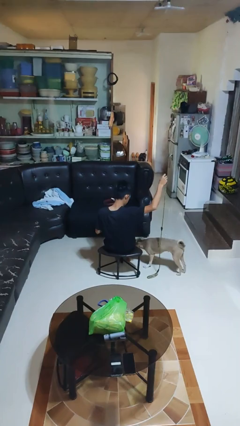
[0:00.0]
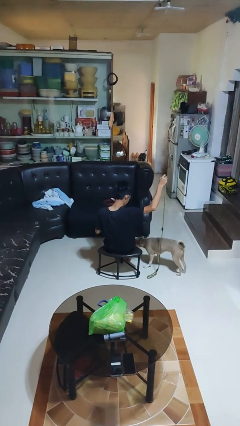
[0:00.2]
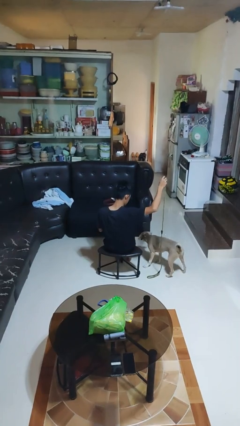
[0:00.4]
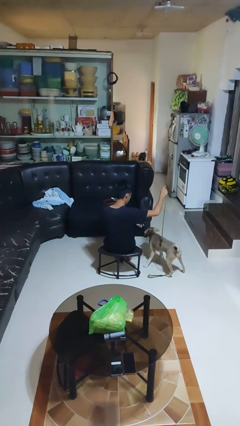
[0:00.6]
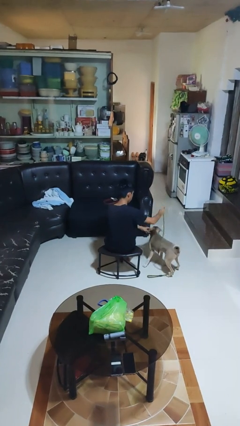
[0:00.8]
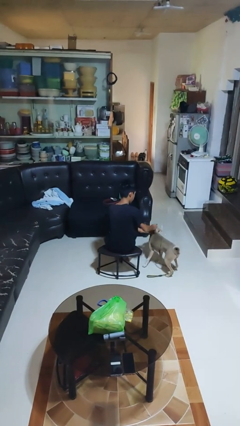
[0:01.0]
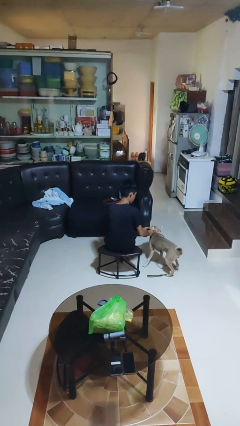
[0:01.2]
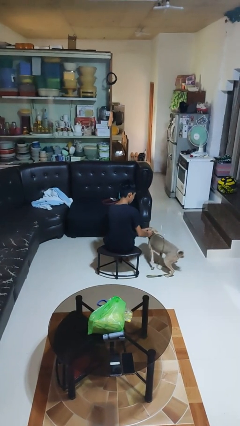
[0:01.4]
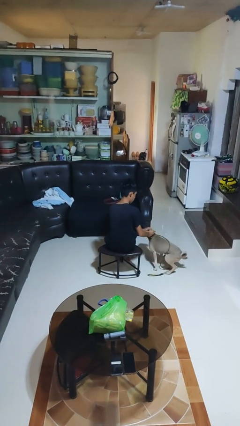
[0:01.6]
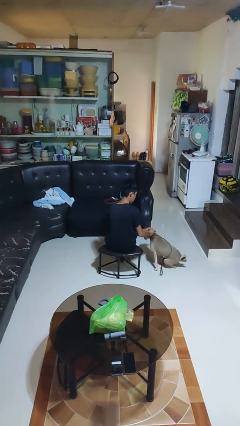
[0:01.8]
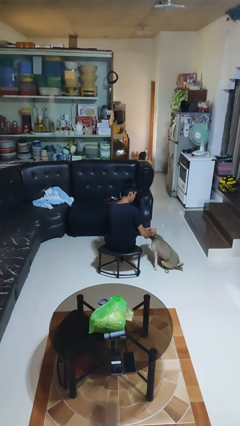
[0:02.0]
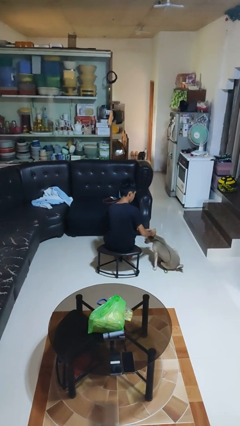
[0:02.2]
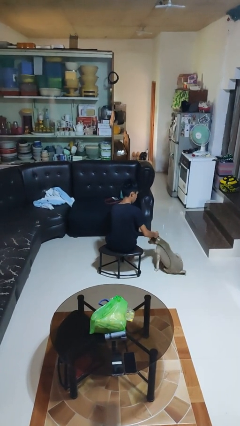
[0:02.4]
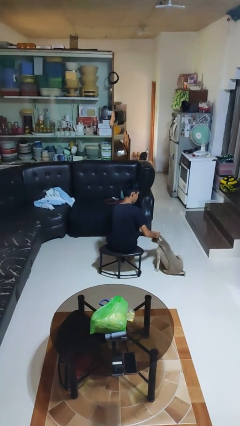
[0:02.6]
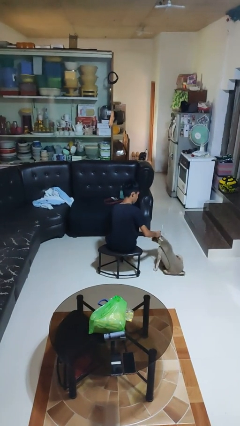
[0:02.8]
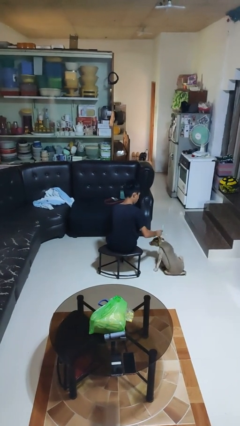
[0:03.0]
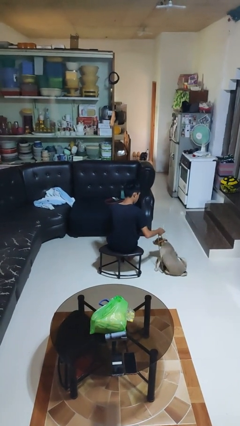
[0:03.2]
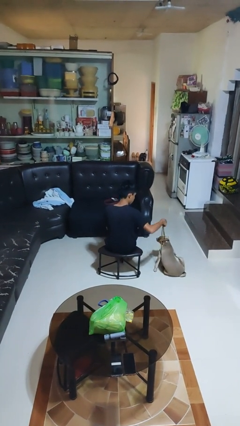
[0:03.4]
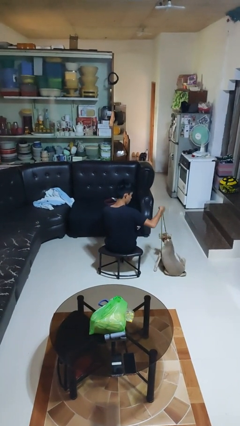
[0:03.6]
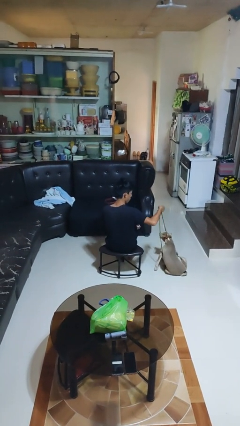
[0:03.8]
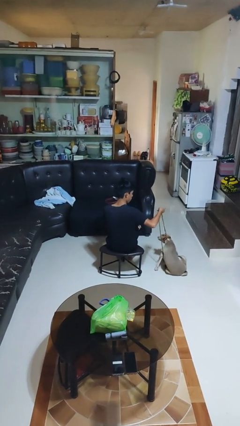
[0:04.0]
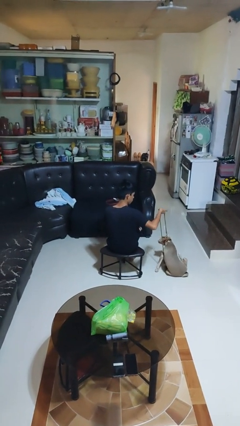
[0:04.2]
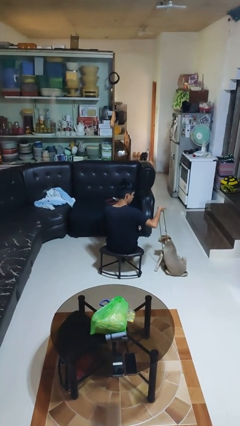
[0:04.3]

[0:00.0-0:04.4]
person attaches leash to dog

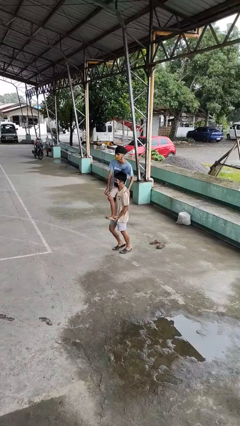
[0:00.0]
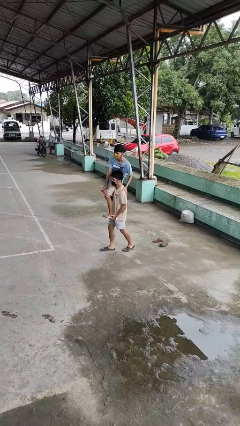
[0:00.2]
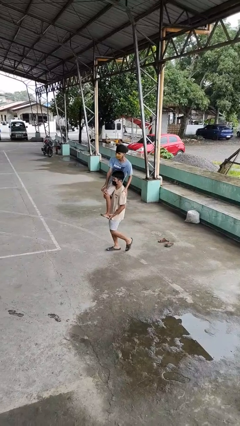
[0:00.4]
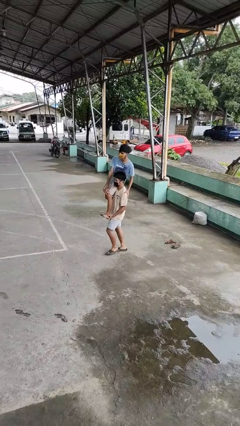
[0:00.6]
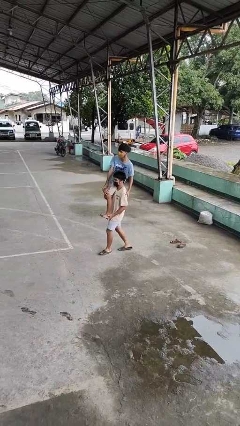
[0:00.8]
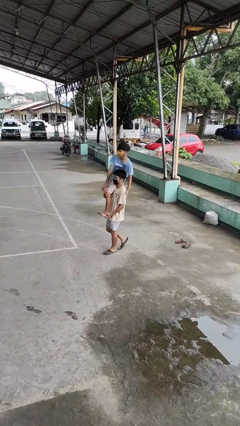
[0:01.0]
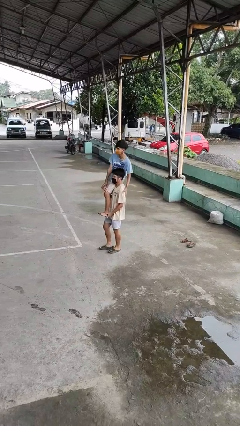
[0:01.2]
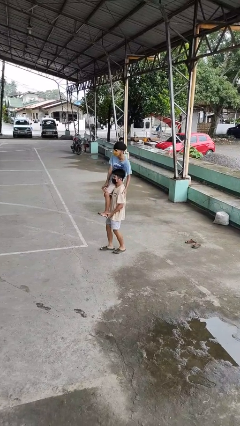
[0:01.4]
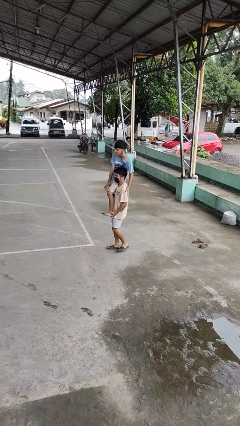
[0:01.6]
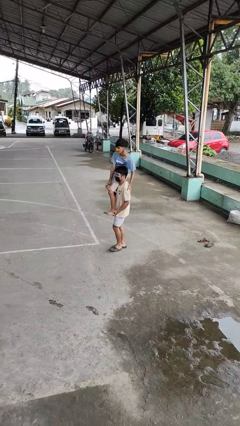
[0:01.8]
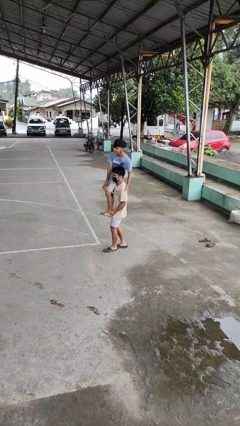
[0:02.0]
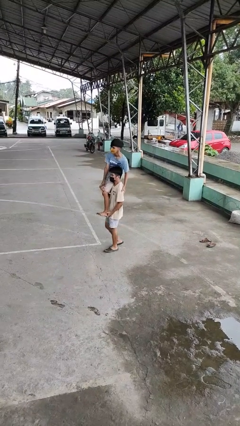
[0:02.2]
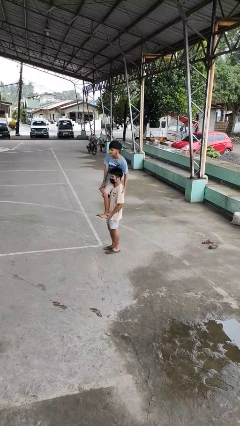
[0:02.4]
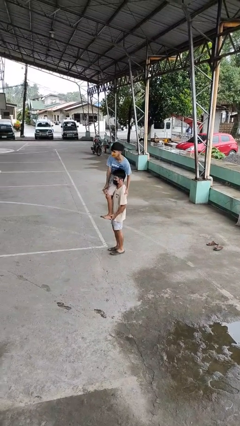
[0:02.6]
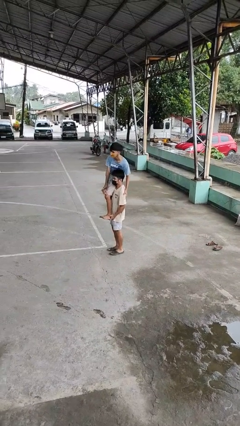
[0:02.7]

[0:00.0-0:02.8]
person carries person on shoulders

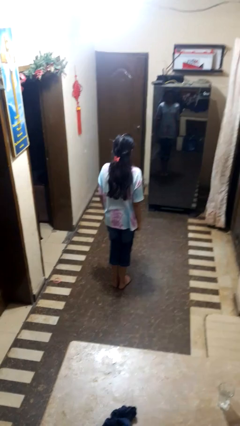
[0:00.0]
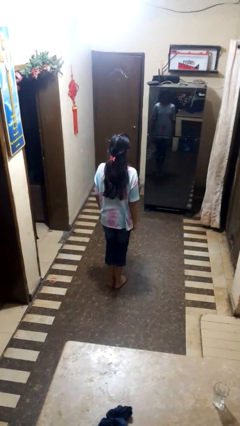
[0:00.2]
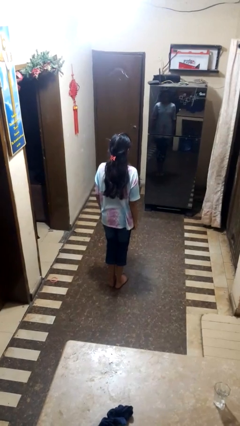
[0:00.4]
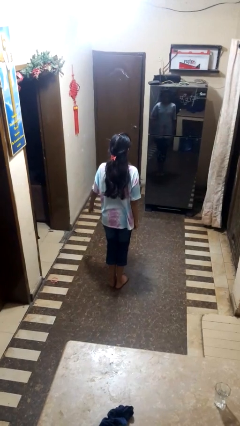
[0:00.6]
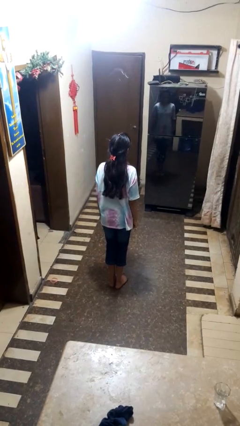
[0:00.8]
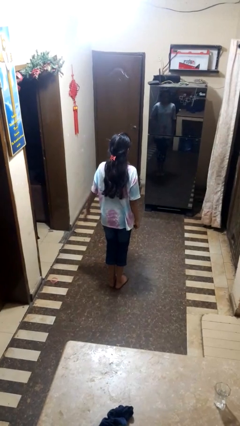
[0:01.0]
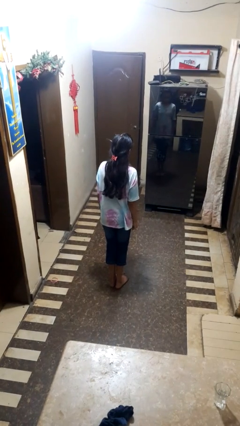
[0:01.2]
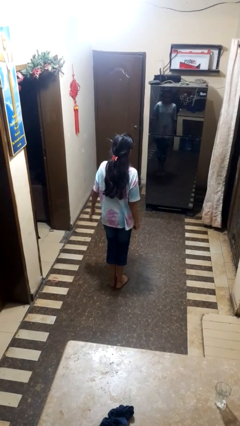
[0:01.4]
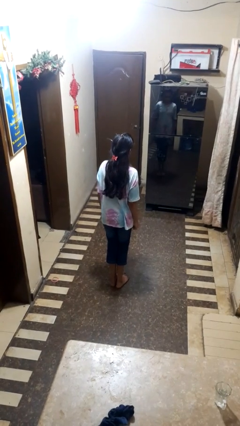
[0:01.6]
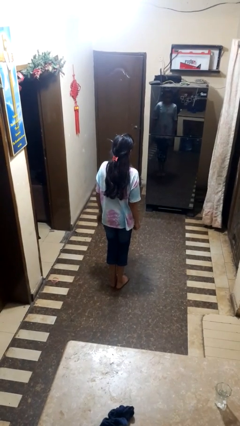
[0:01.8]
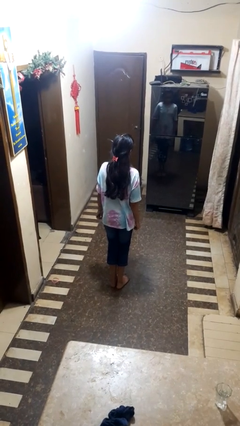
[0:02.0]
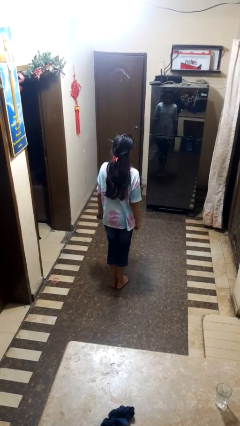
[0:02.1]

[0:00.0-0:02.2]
person slaps hands on thighs

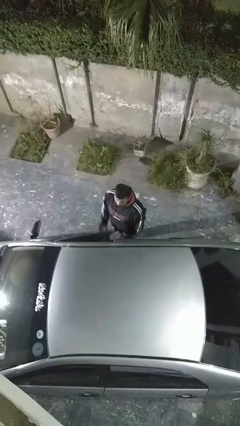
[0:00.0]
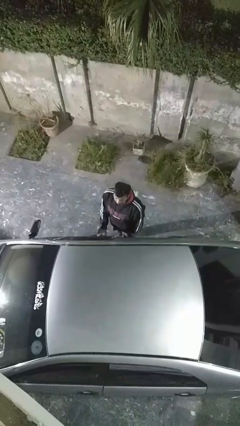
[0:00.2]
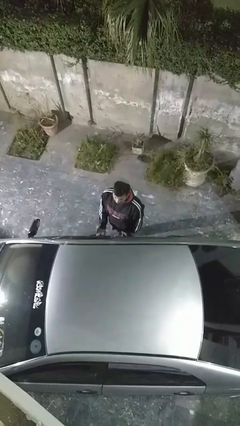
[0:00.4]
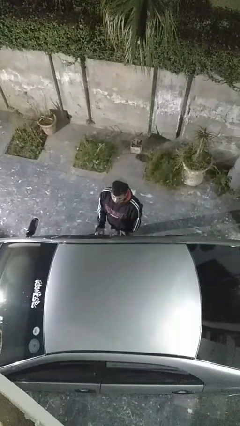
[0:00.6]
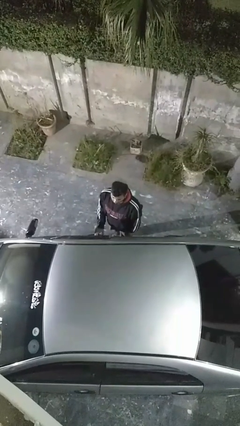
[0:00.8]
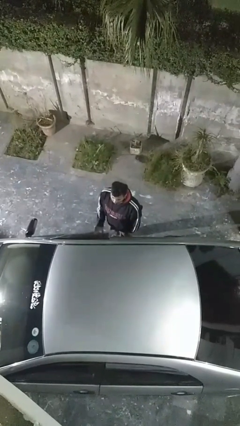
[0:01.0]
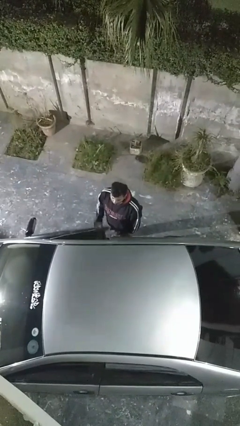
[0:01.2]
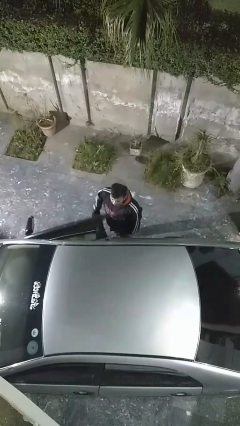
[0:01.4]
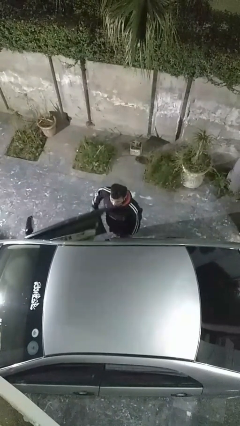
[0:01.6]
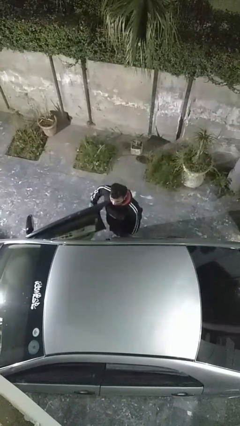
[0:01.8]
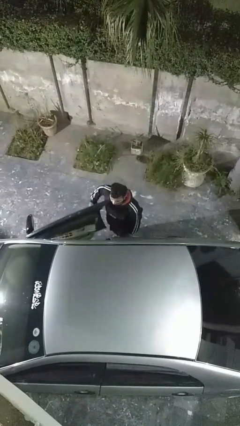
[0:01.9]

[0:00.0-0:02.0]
person opens car door

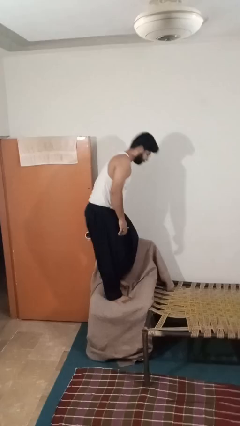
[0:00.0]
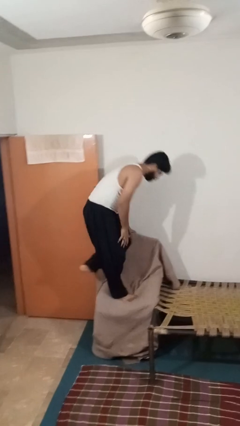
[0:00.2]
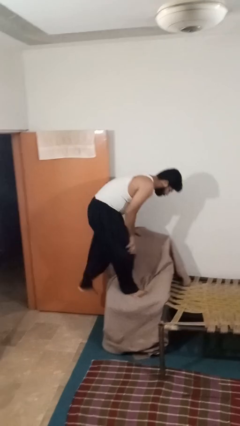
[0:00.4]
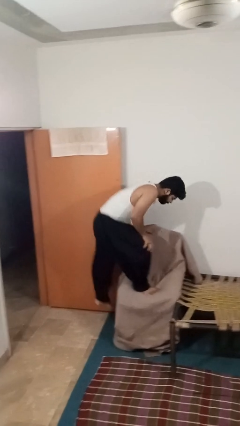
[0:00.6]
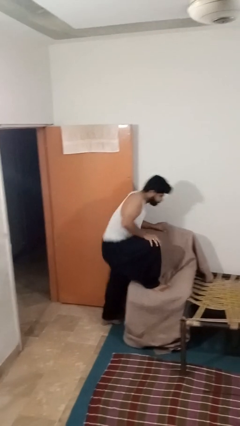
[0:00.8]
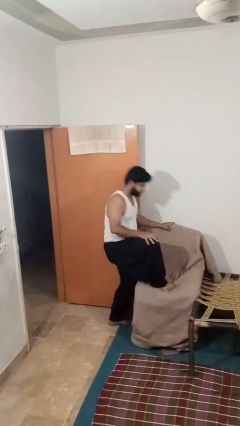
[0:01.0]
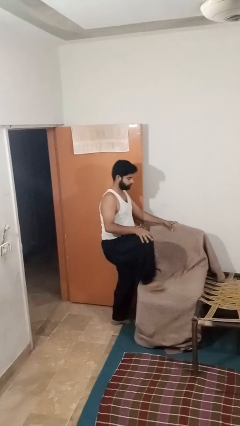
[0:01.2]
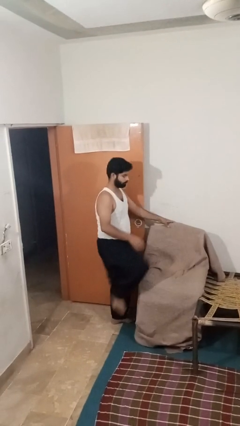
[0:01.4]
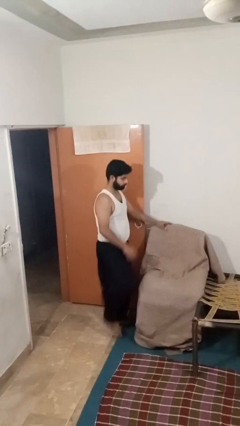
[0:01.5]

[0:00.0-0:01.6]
person climbs off couch

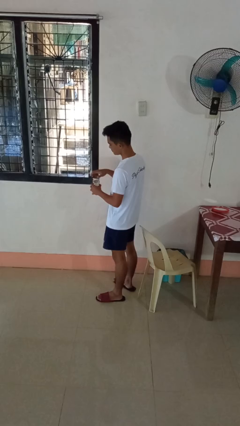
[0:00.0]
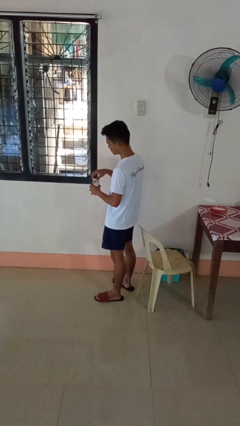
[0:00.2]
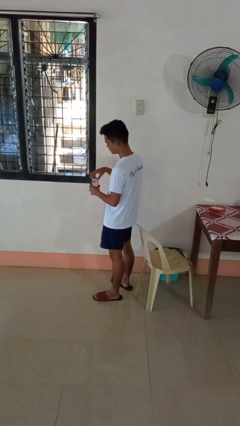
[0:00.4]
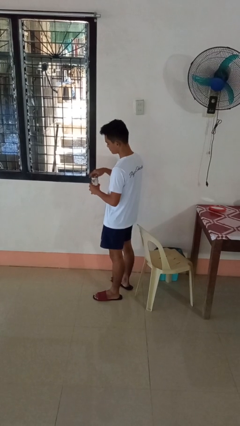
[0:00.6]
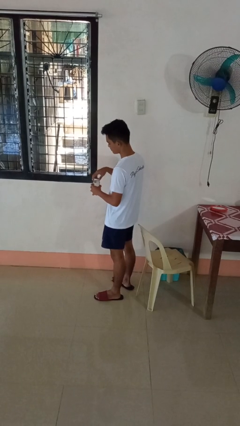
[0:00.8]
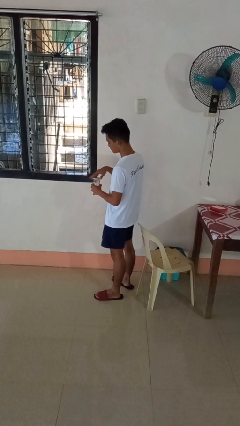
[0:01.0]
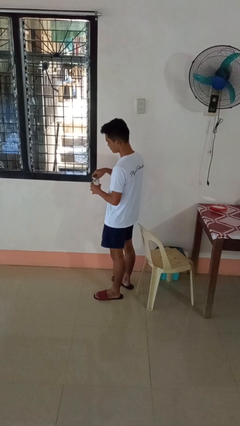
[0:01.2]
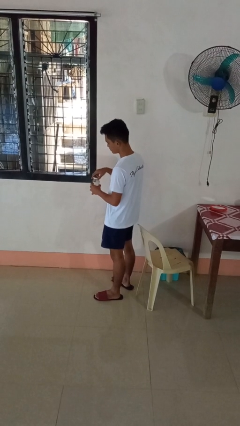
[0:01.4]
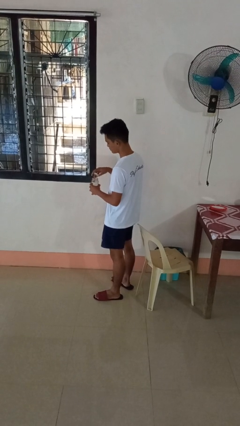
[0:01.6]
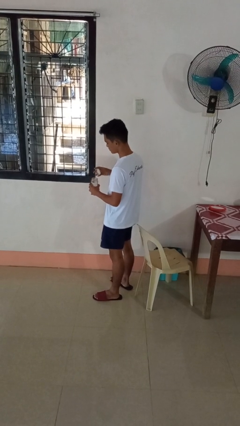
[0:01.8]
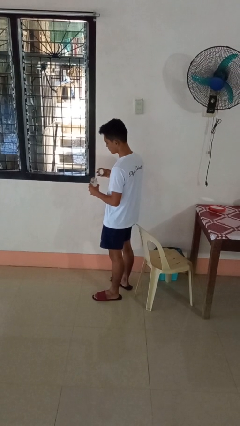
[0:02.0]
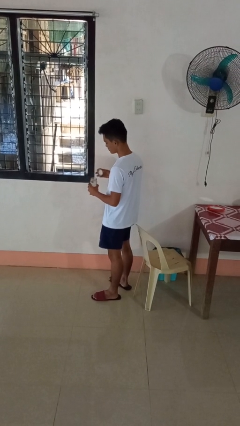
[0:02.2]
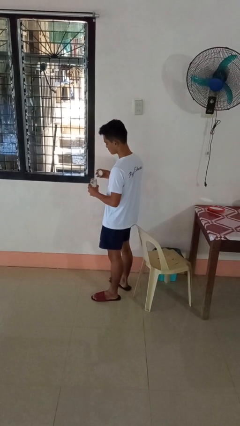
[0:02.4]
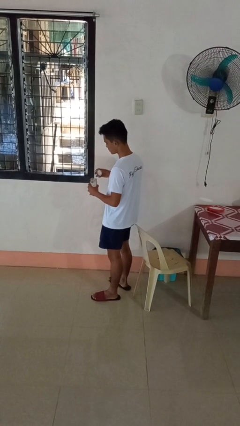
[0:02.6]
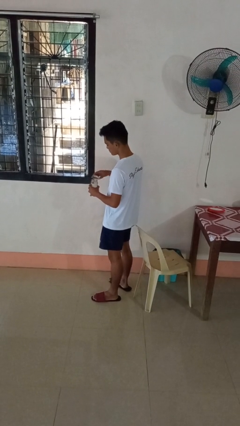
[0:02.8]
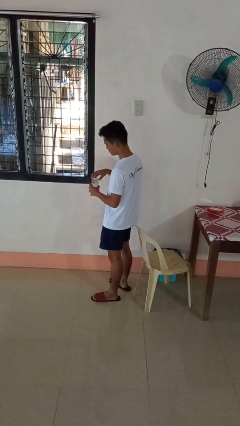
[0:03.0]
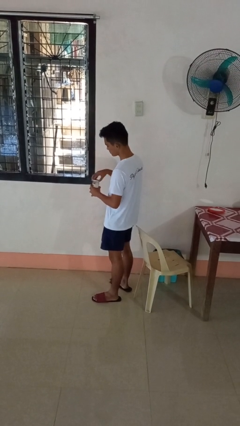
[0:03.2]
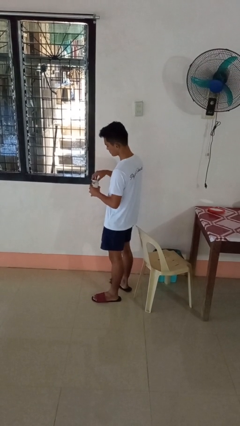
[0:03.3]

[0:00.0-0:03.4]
person opens jar

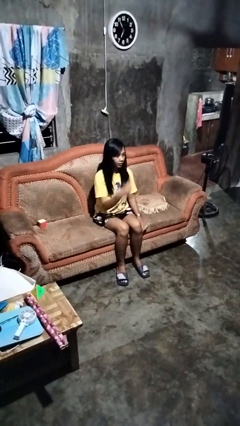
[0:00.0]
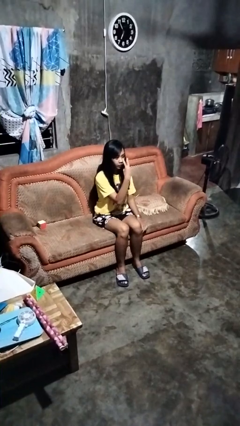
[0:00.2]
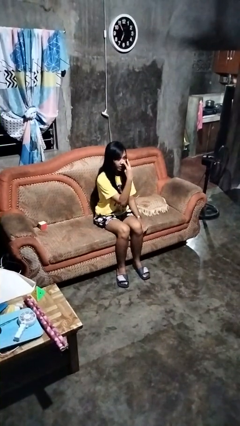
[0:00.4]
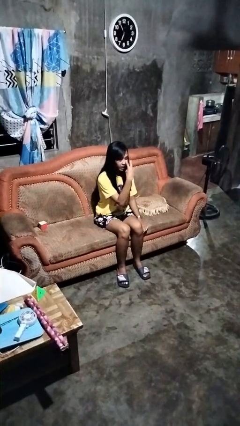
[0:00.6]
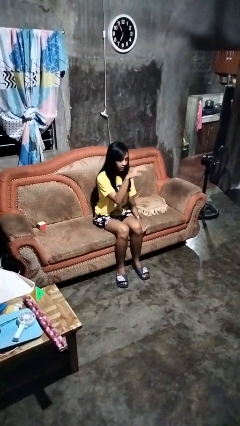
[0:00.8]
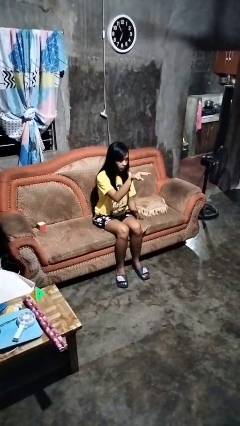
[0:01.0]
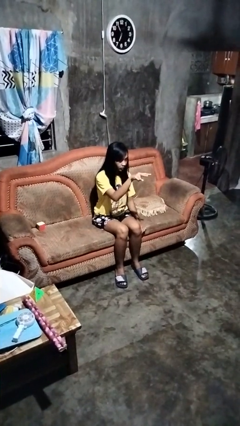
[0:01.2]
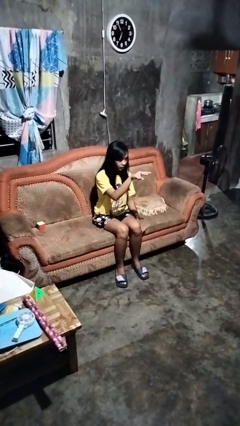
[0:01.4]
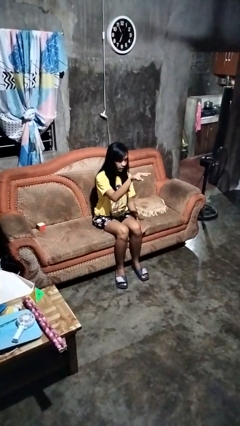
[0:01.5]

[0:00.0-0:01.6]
person gestures watch closely
